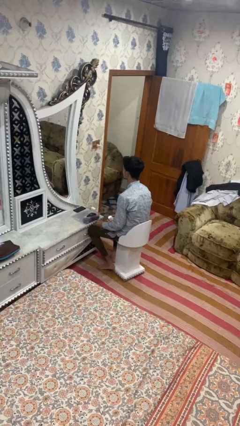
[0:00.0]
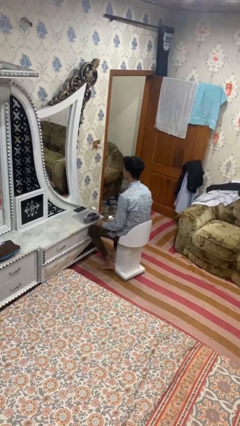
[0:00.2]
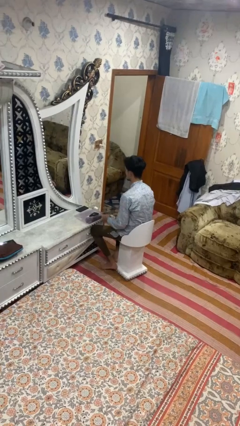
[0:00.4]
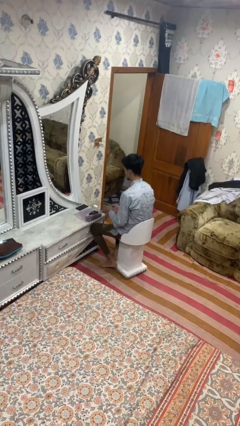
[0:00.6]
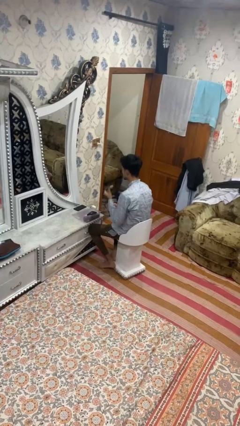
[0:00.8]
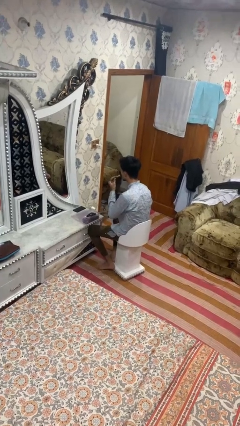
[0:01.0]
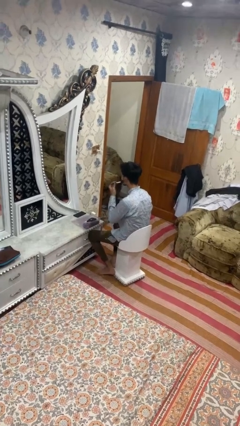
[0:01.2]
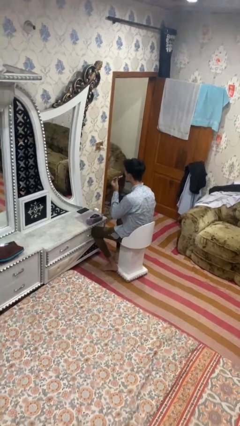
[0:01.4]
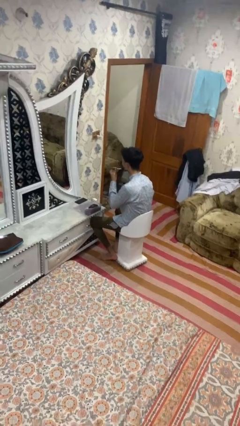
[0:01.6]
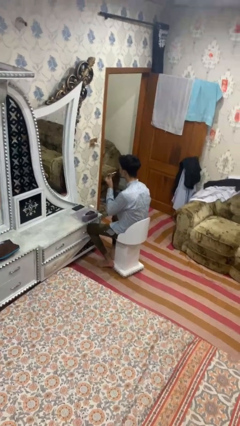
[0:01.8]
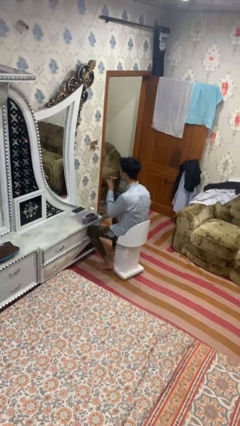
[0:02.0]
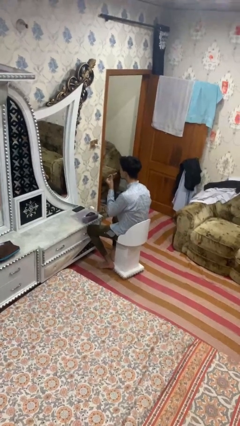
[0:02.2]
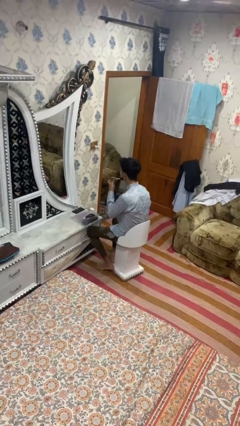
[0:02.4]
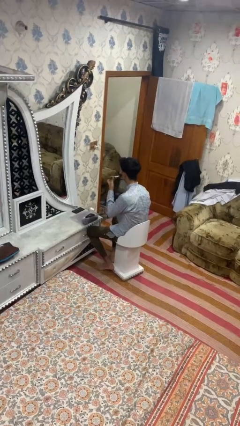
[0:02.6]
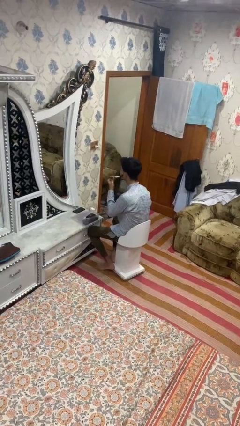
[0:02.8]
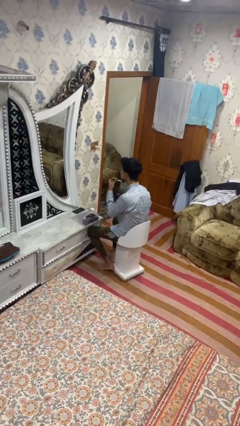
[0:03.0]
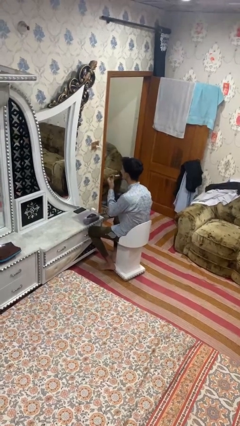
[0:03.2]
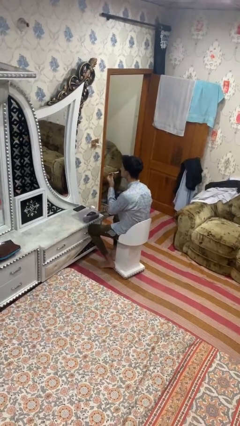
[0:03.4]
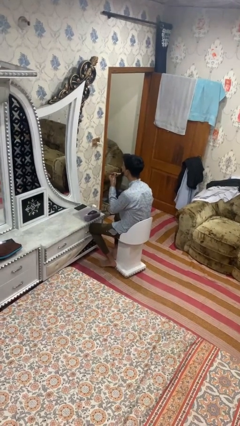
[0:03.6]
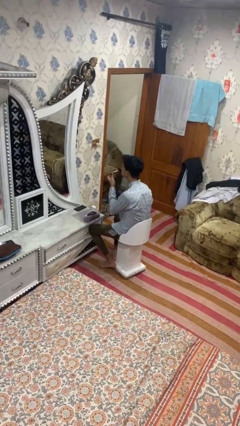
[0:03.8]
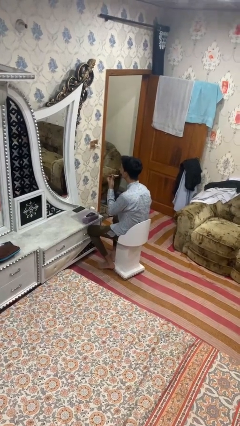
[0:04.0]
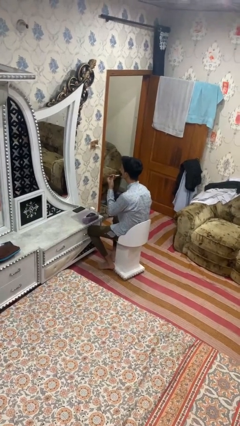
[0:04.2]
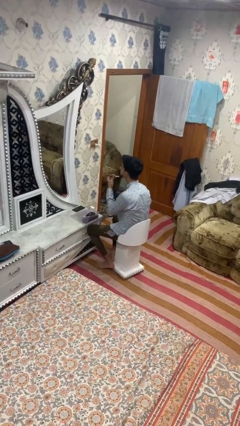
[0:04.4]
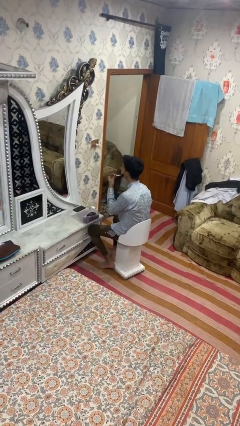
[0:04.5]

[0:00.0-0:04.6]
person applies foundation makeup

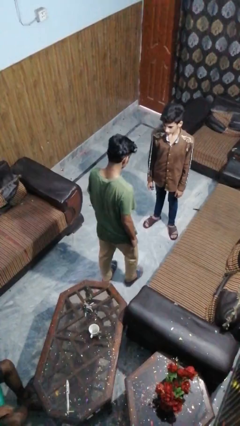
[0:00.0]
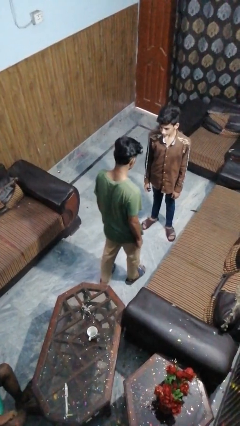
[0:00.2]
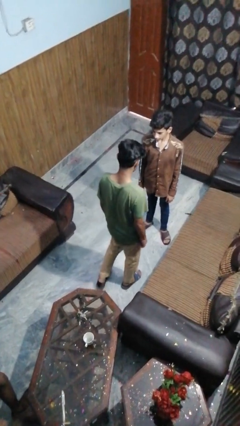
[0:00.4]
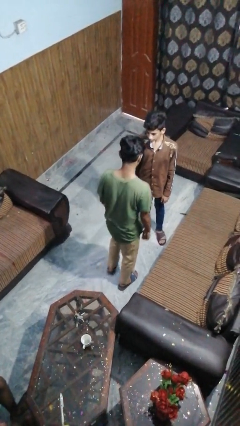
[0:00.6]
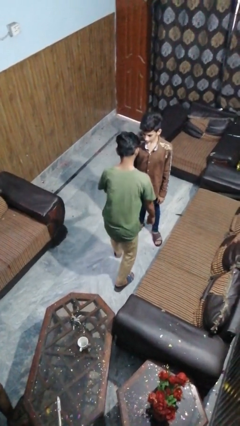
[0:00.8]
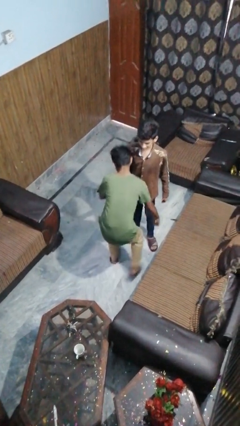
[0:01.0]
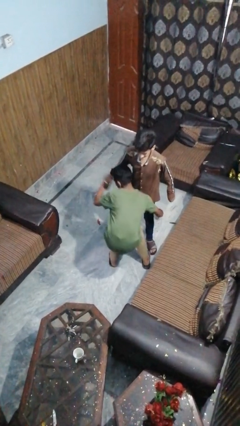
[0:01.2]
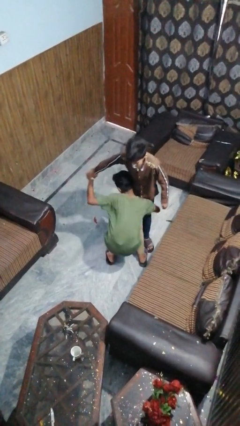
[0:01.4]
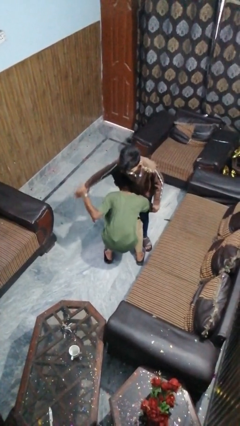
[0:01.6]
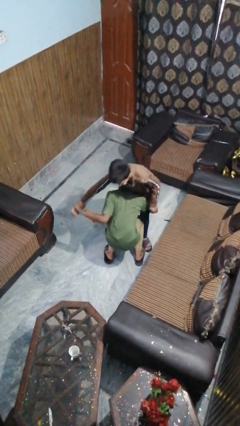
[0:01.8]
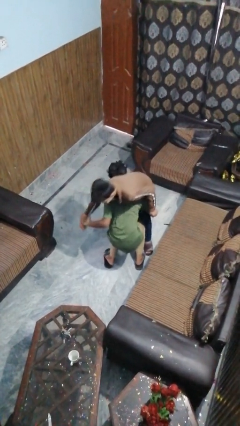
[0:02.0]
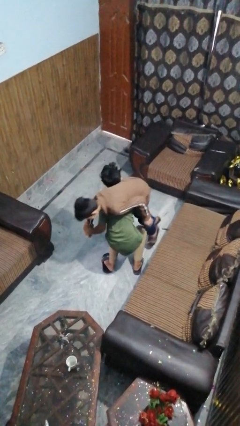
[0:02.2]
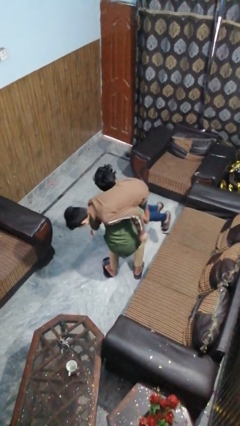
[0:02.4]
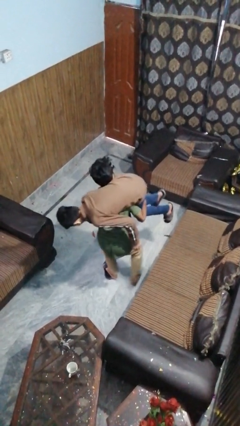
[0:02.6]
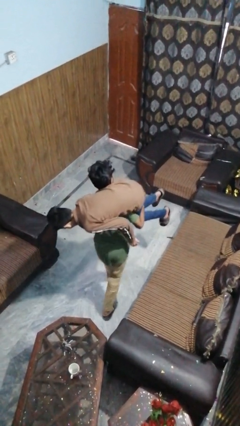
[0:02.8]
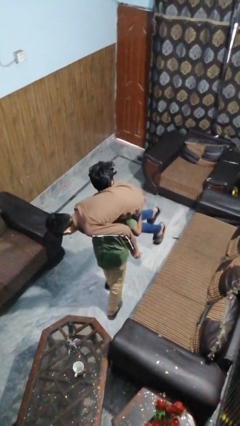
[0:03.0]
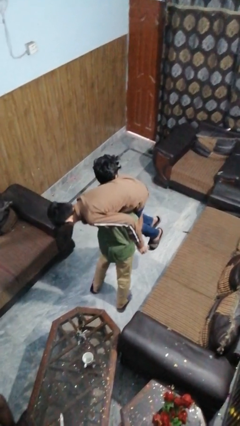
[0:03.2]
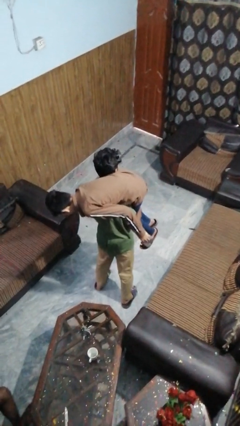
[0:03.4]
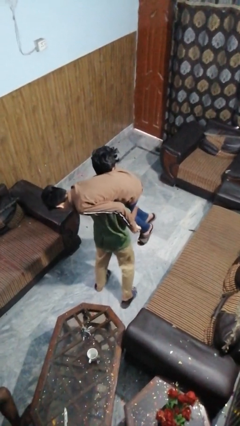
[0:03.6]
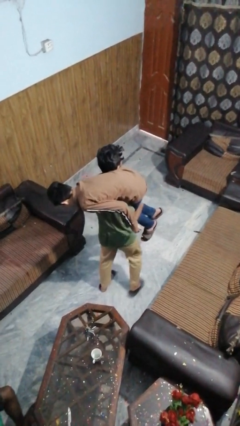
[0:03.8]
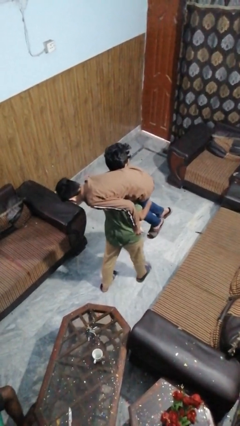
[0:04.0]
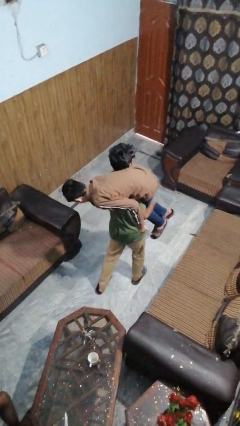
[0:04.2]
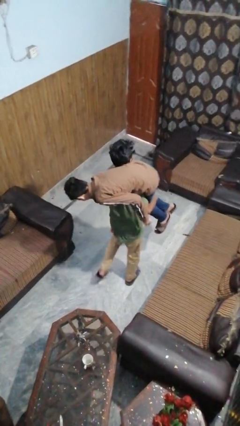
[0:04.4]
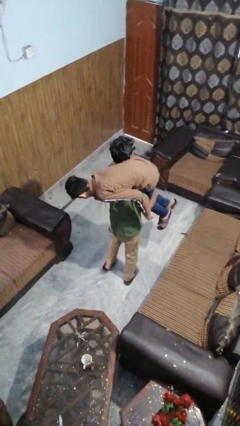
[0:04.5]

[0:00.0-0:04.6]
person carries person on shoulders

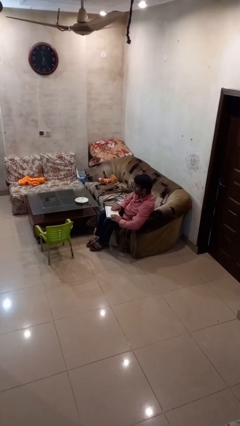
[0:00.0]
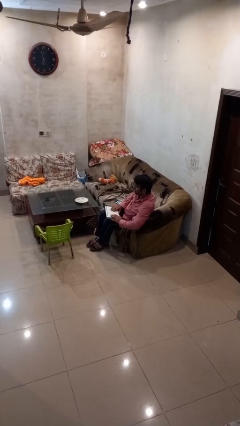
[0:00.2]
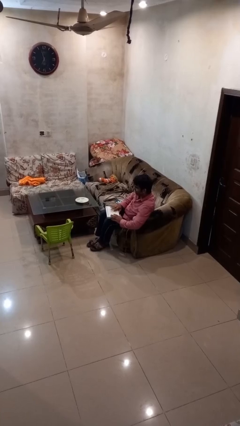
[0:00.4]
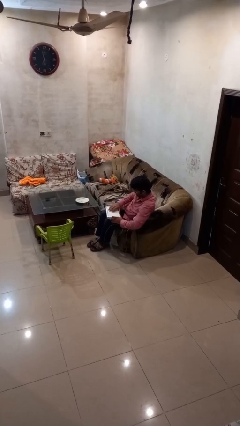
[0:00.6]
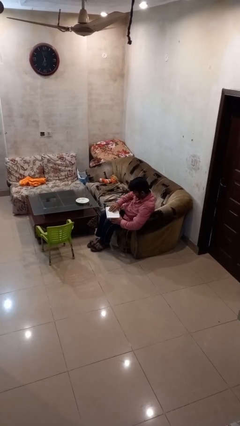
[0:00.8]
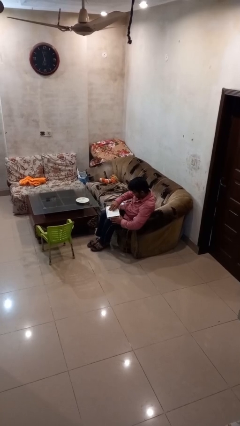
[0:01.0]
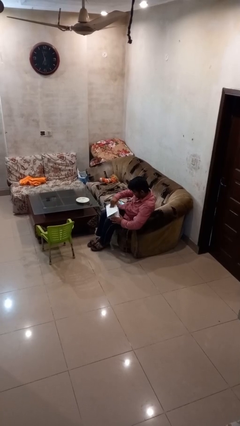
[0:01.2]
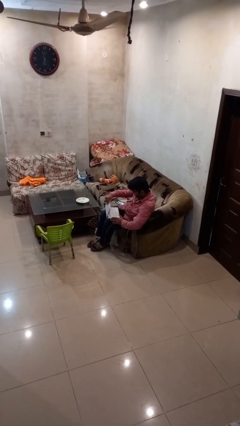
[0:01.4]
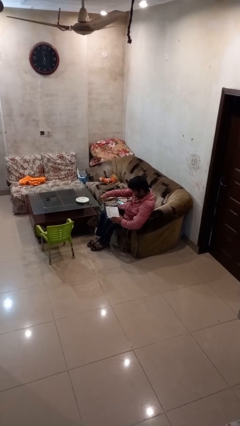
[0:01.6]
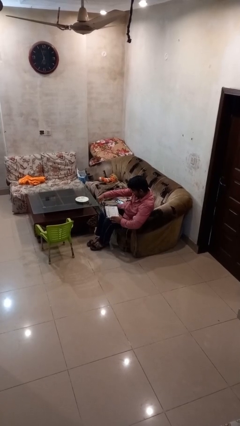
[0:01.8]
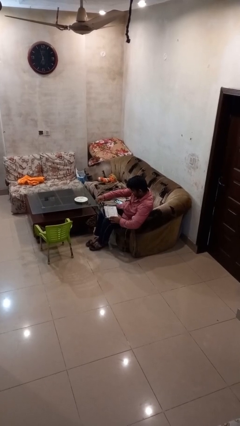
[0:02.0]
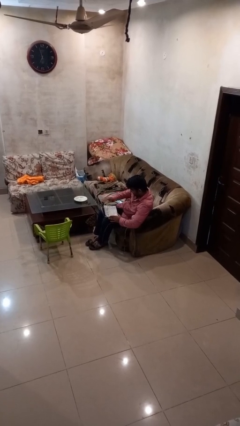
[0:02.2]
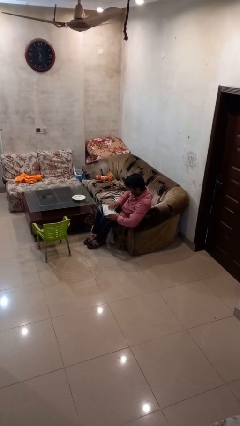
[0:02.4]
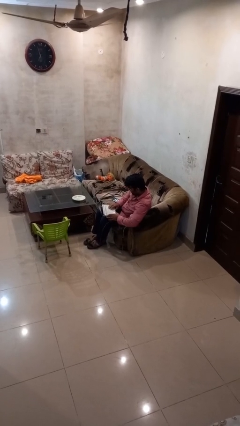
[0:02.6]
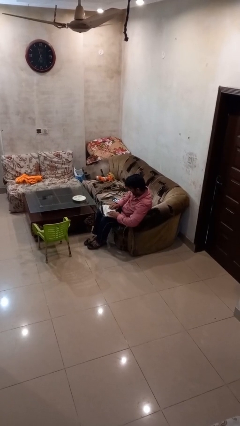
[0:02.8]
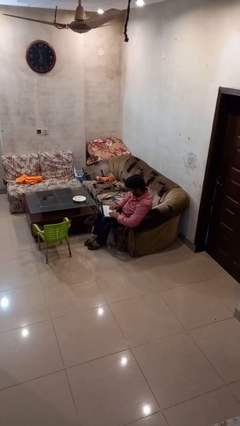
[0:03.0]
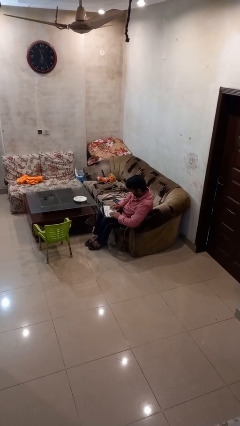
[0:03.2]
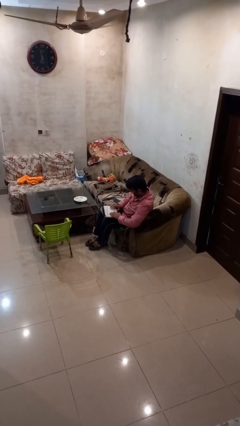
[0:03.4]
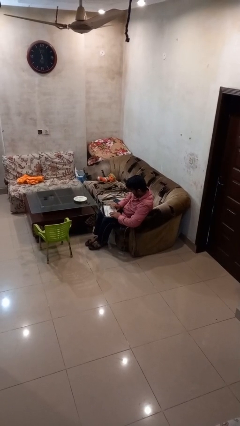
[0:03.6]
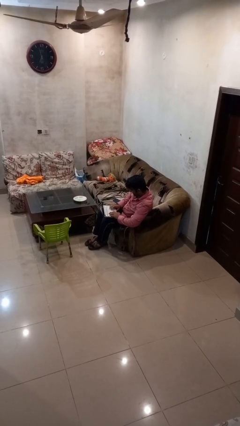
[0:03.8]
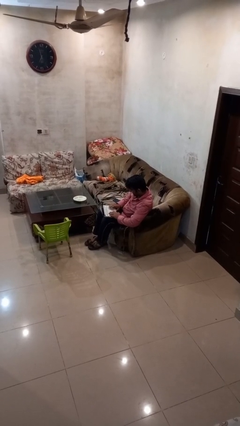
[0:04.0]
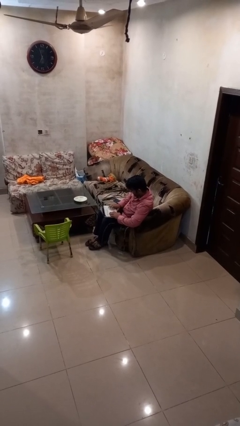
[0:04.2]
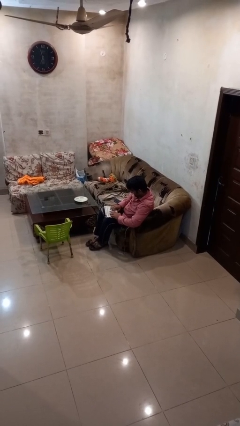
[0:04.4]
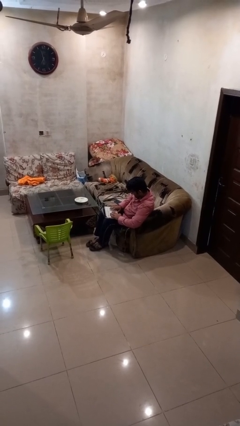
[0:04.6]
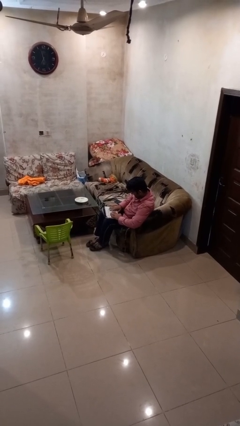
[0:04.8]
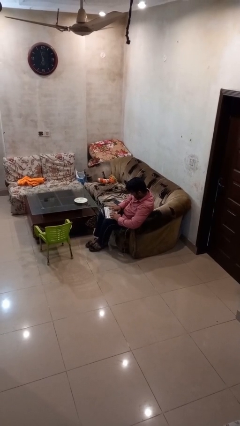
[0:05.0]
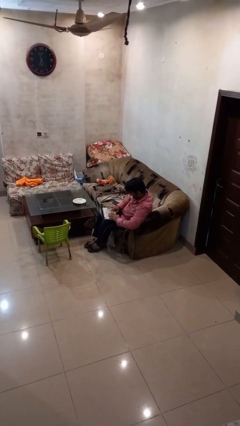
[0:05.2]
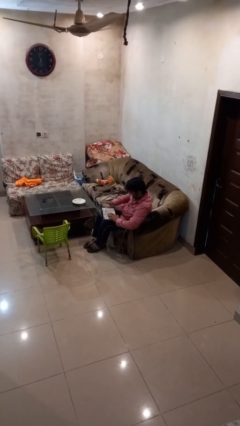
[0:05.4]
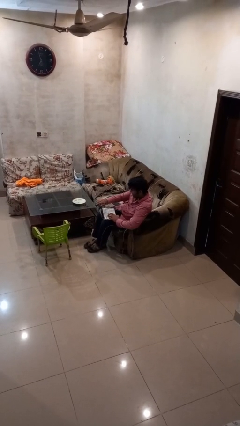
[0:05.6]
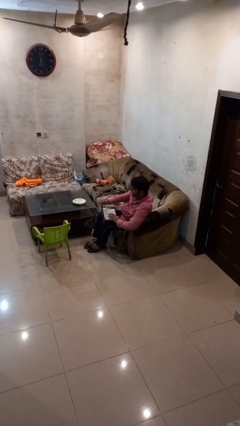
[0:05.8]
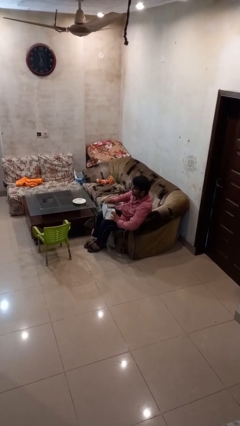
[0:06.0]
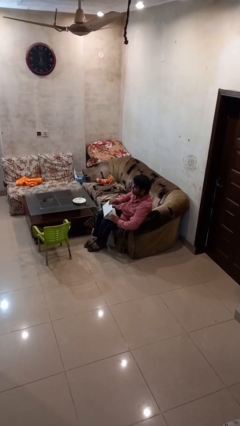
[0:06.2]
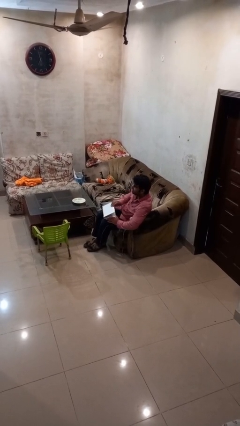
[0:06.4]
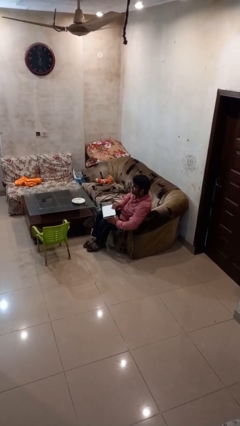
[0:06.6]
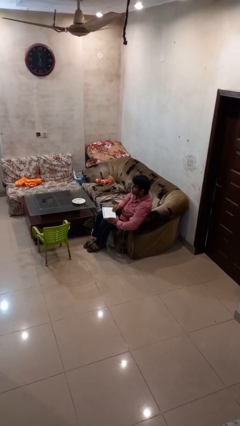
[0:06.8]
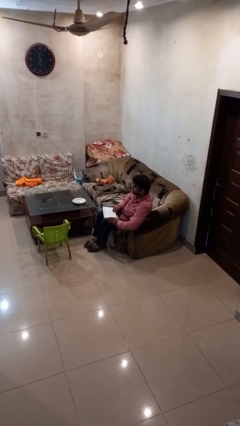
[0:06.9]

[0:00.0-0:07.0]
person interacts with laptop

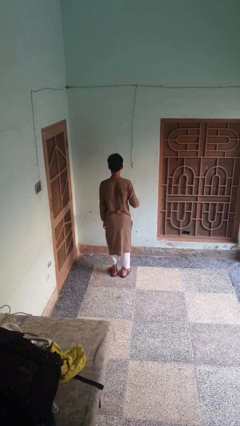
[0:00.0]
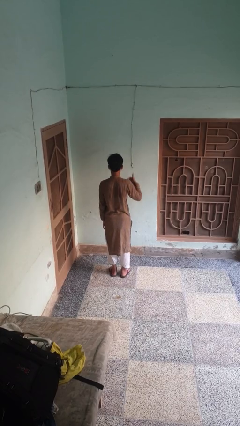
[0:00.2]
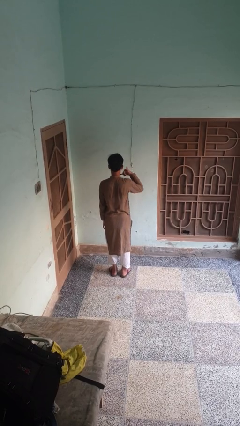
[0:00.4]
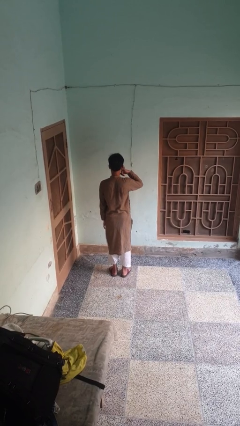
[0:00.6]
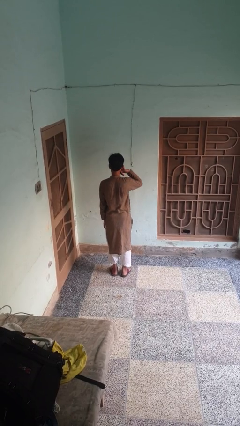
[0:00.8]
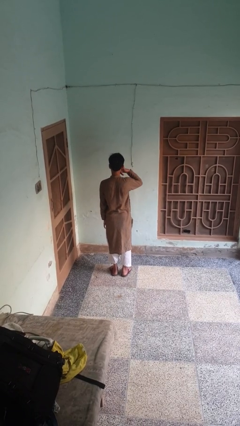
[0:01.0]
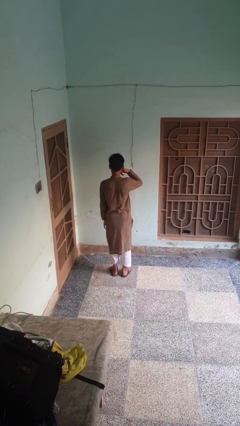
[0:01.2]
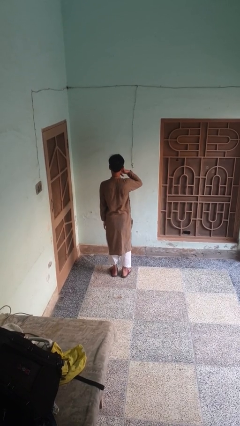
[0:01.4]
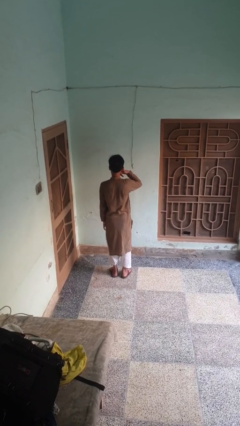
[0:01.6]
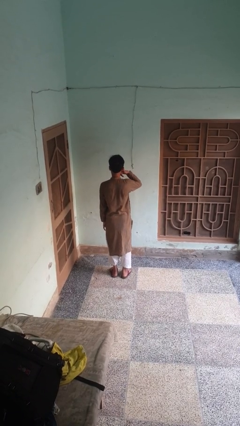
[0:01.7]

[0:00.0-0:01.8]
person gestures call me
